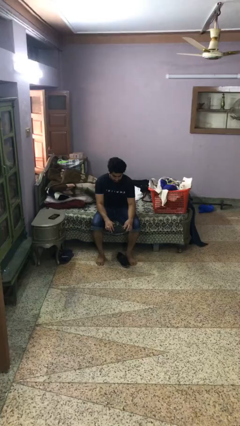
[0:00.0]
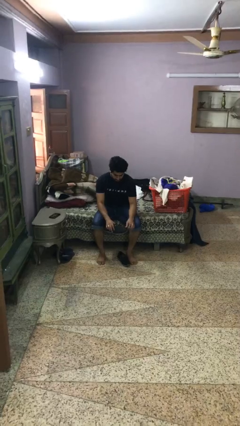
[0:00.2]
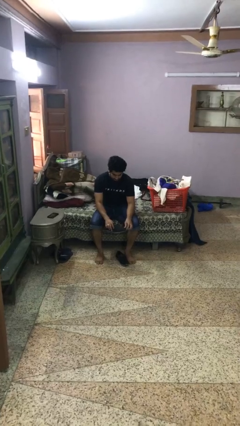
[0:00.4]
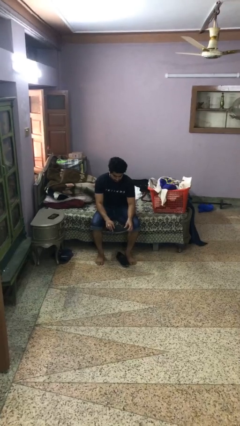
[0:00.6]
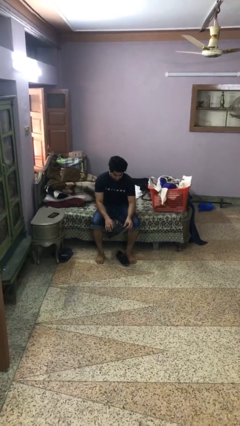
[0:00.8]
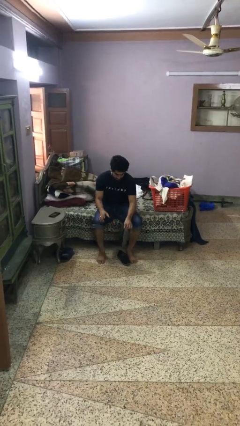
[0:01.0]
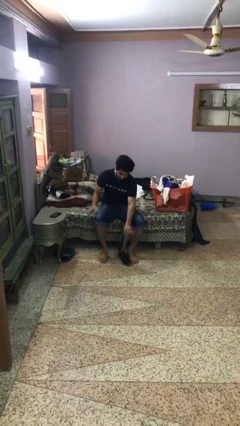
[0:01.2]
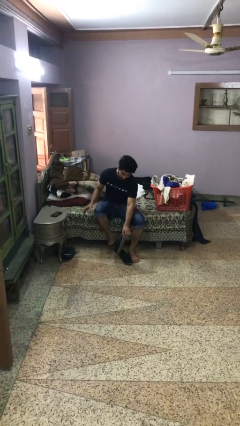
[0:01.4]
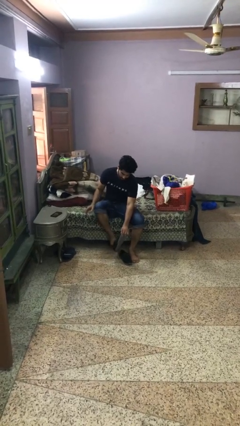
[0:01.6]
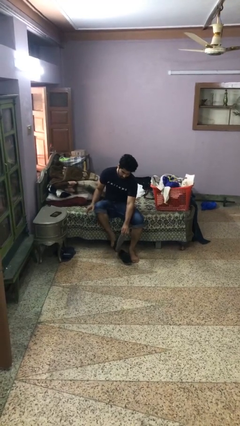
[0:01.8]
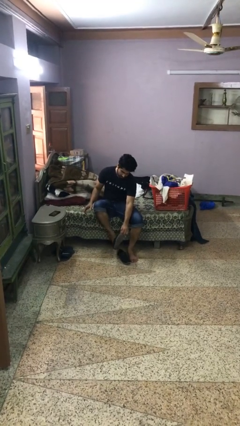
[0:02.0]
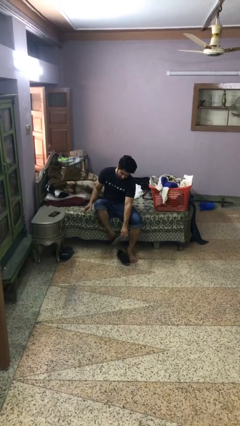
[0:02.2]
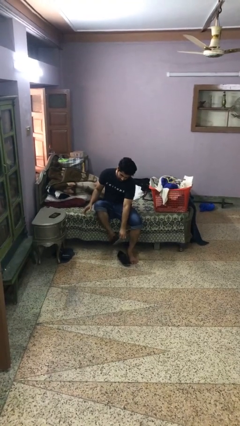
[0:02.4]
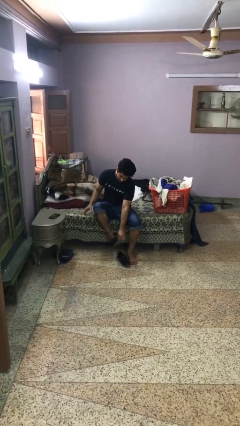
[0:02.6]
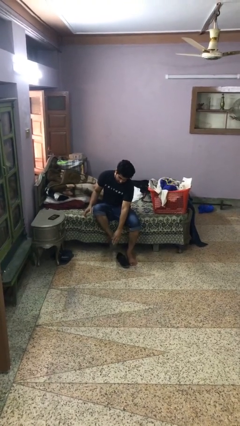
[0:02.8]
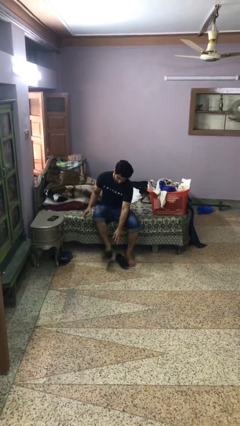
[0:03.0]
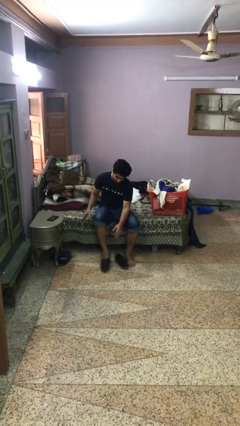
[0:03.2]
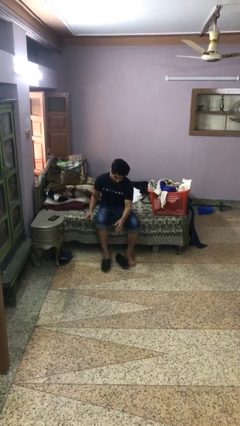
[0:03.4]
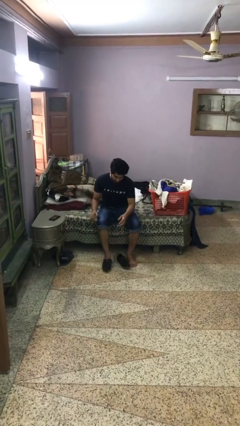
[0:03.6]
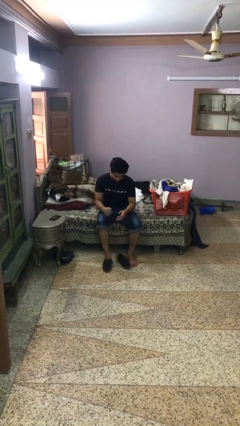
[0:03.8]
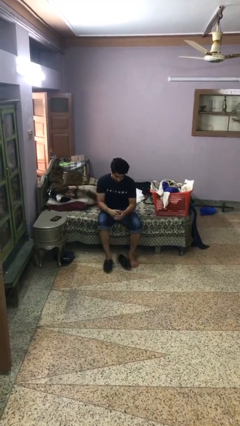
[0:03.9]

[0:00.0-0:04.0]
person puts on boots

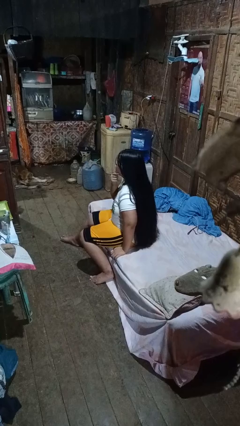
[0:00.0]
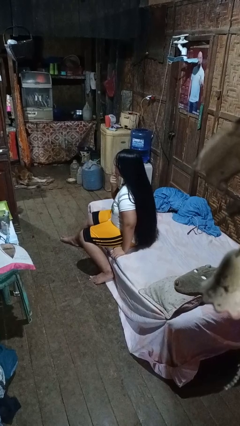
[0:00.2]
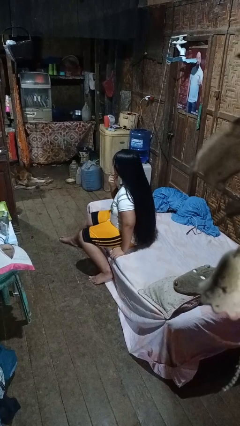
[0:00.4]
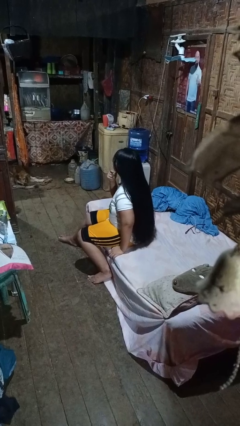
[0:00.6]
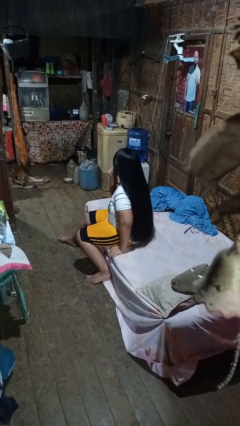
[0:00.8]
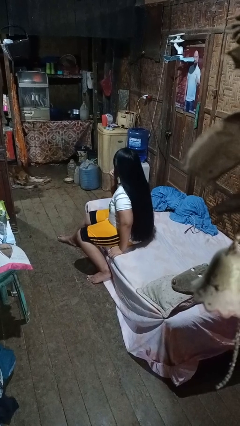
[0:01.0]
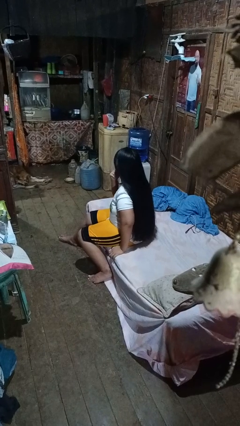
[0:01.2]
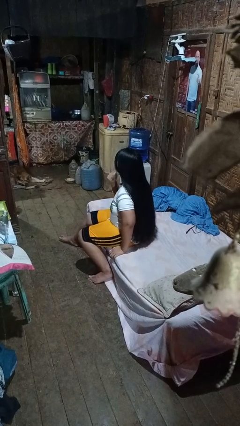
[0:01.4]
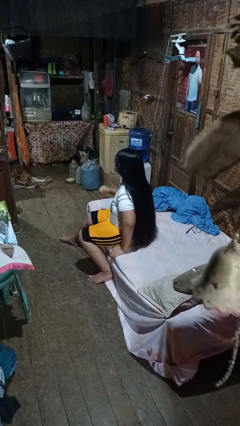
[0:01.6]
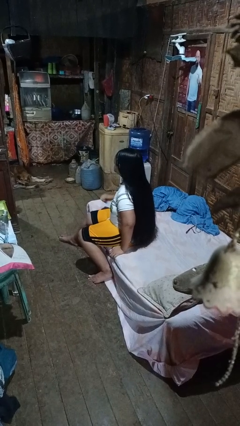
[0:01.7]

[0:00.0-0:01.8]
person strokes chin

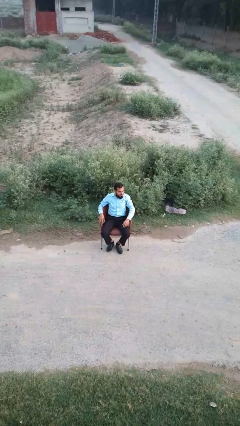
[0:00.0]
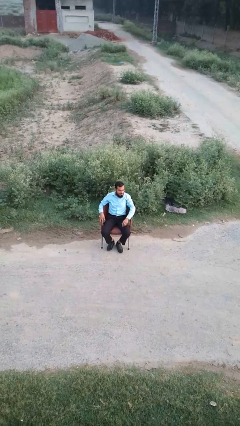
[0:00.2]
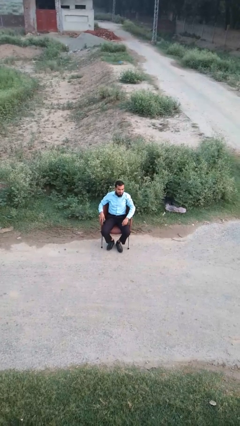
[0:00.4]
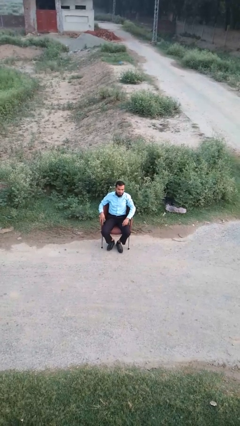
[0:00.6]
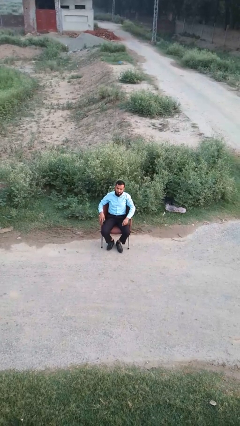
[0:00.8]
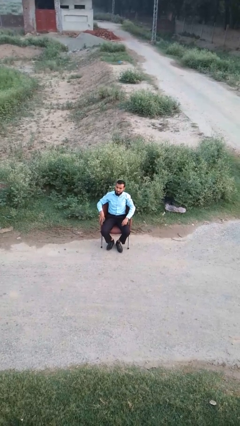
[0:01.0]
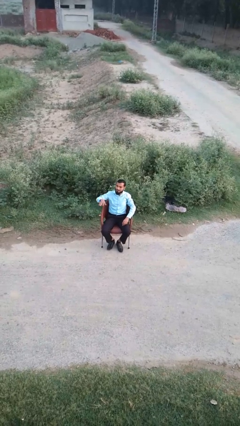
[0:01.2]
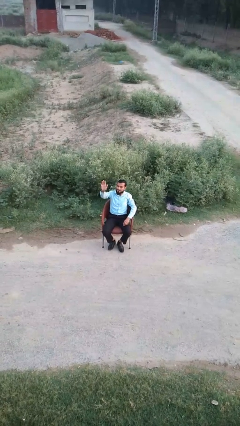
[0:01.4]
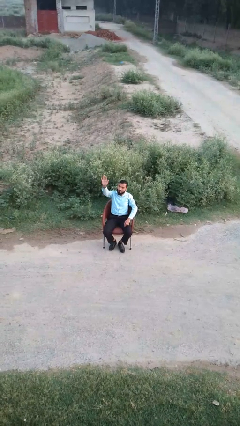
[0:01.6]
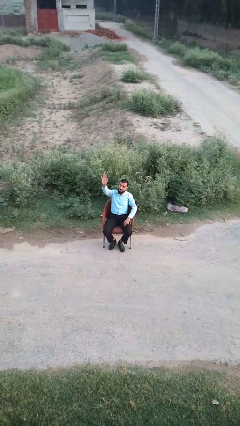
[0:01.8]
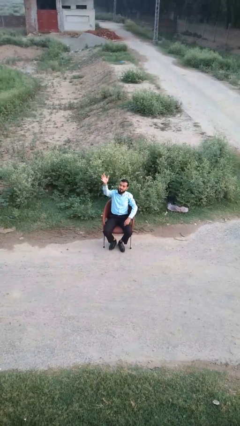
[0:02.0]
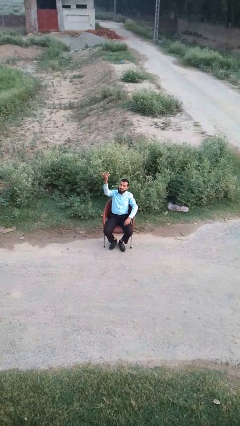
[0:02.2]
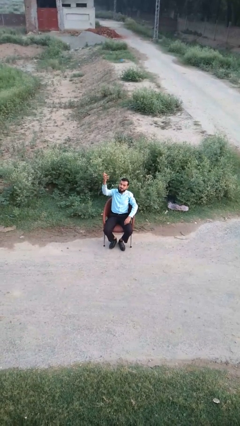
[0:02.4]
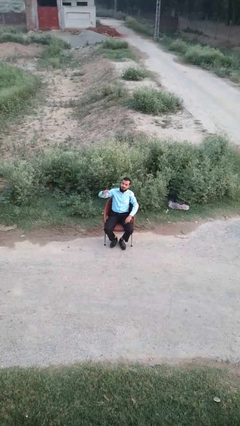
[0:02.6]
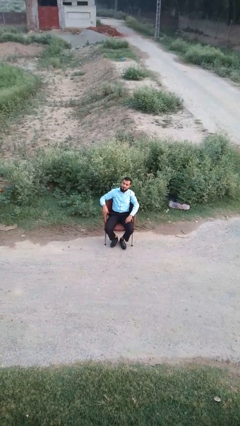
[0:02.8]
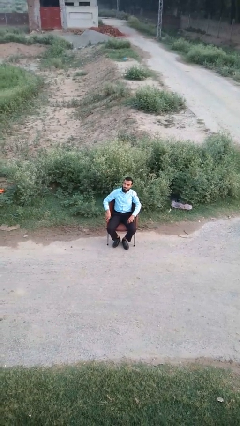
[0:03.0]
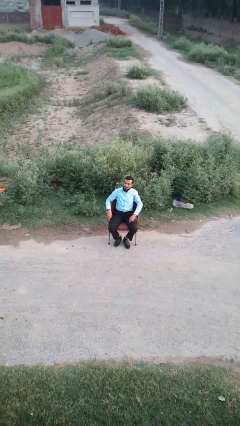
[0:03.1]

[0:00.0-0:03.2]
person gestures raise hand

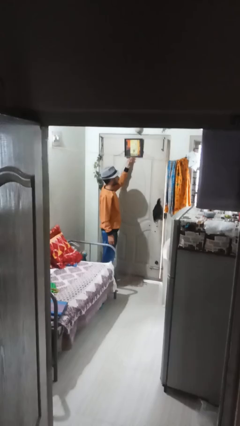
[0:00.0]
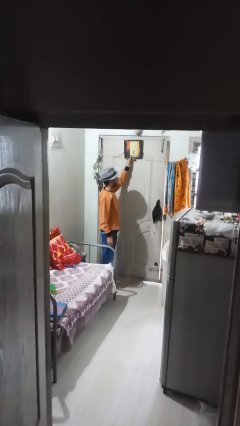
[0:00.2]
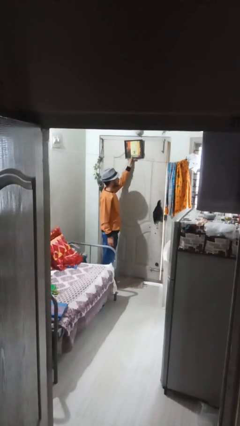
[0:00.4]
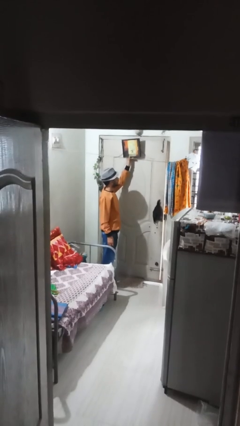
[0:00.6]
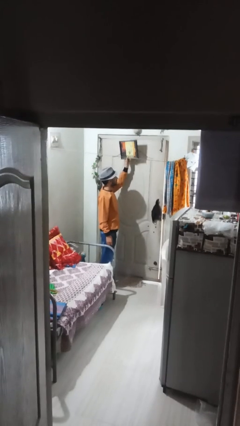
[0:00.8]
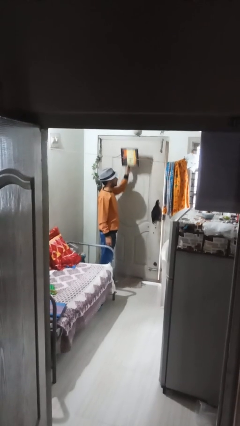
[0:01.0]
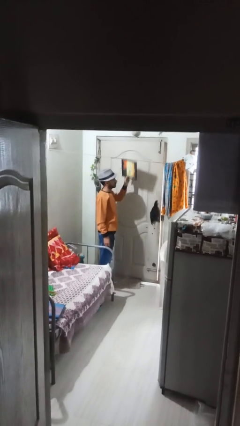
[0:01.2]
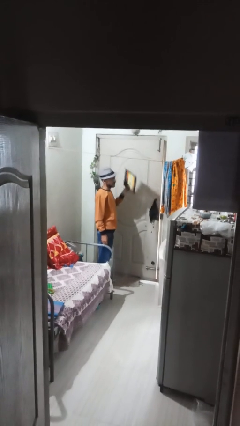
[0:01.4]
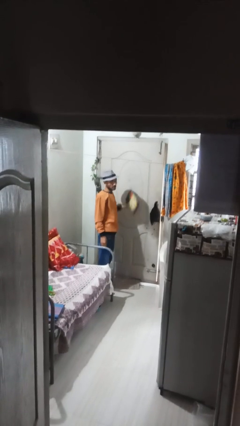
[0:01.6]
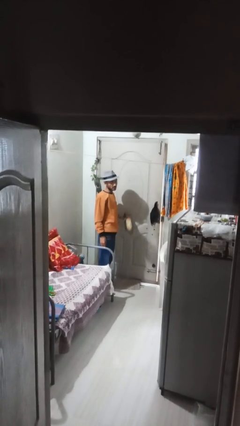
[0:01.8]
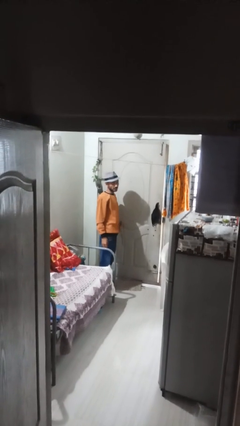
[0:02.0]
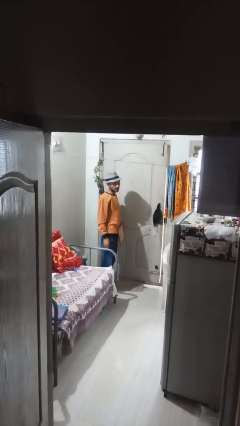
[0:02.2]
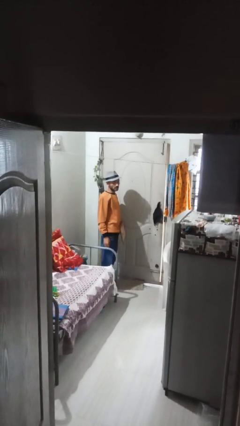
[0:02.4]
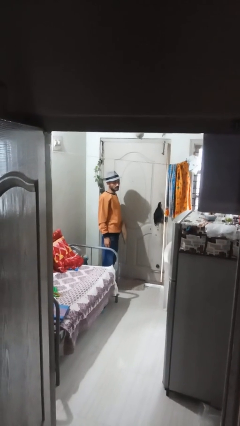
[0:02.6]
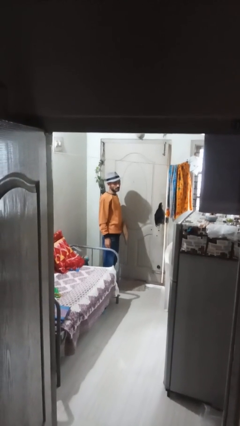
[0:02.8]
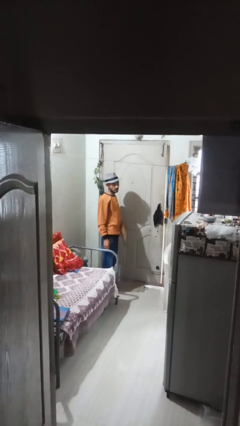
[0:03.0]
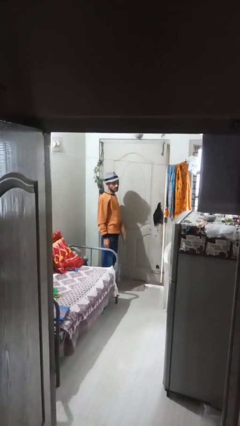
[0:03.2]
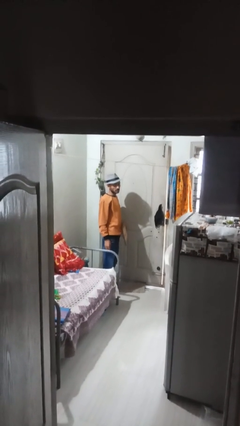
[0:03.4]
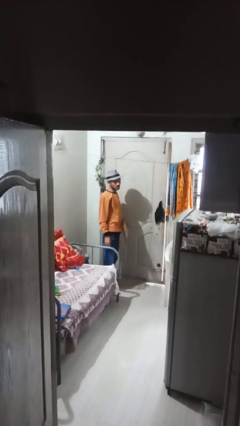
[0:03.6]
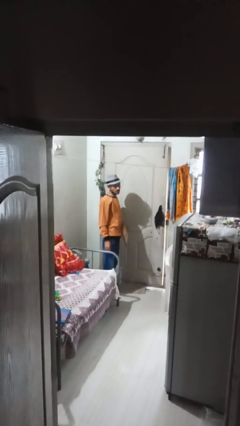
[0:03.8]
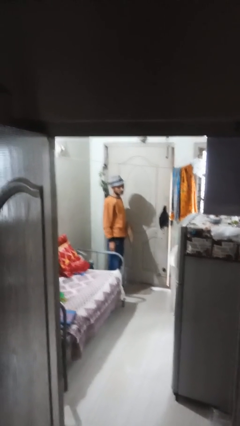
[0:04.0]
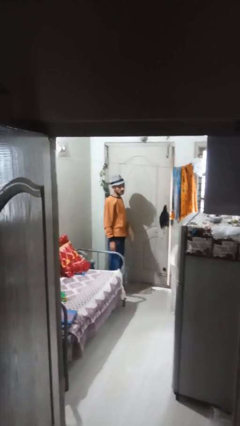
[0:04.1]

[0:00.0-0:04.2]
person takes down picture frame

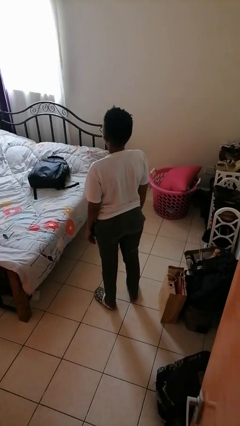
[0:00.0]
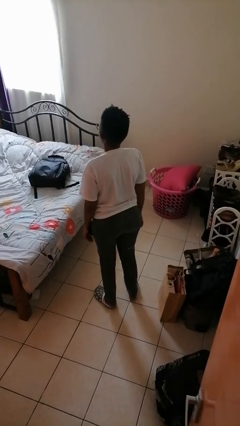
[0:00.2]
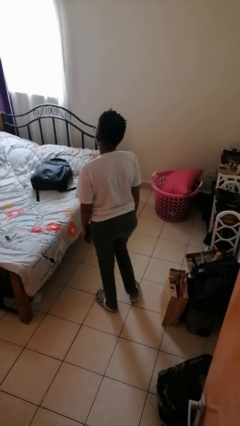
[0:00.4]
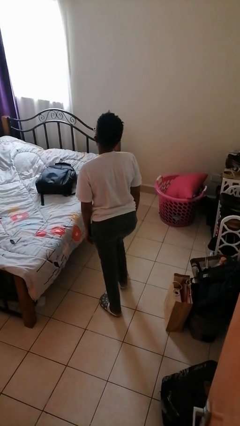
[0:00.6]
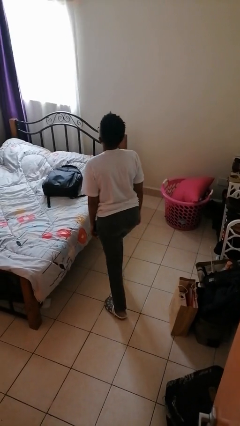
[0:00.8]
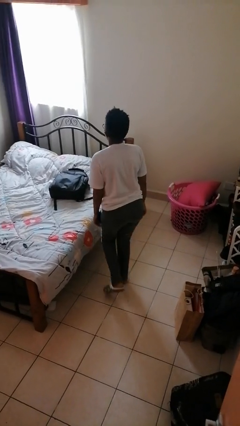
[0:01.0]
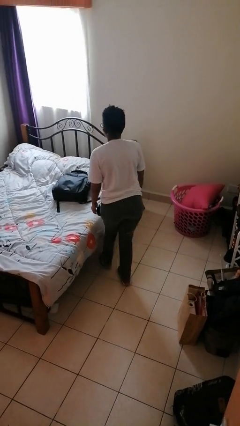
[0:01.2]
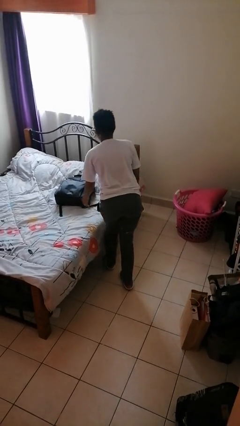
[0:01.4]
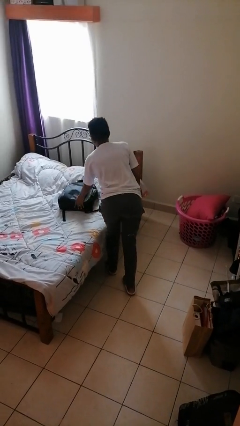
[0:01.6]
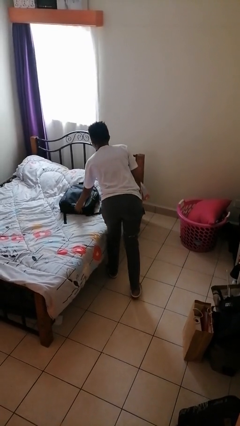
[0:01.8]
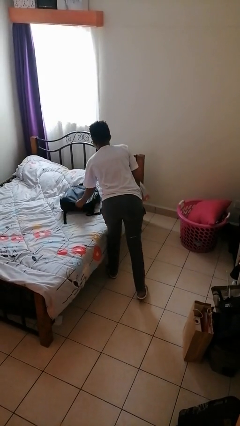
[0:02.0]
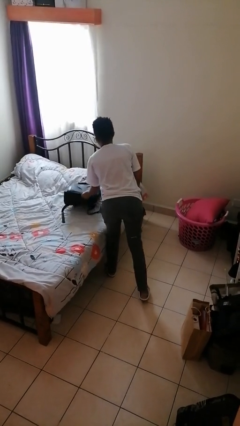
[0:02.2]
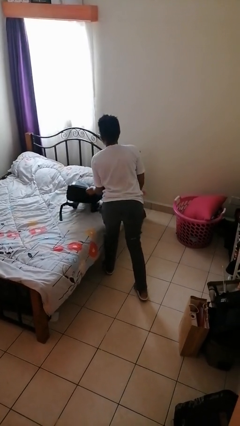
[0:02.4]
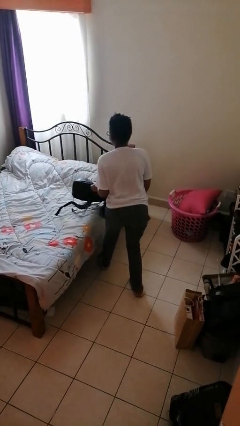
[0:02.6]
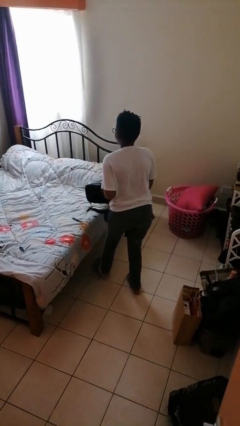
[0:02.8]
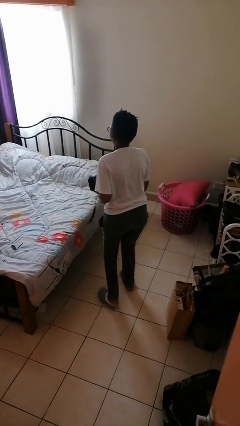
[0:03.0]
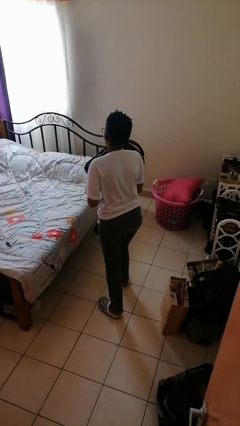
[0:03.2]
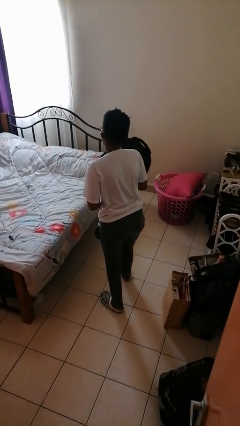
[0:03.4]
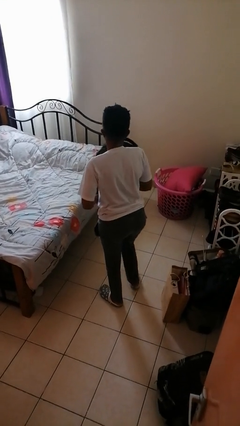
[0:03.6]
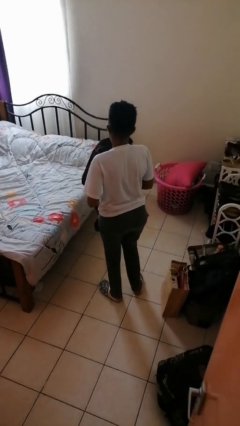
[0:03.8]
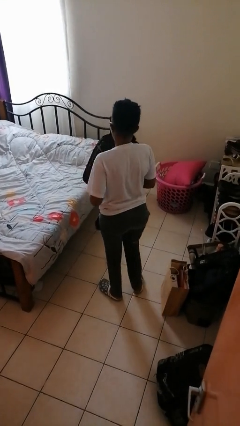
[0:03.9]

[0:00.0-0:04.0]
person picks up object from bed

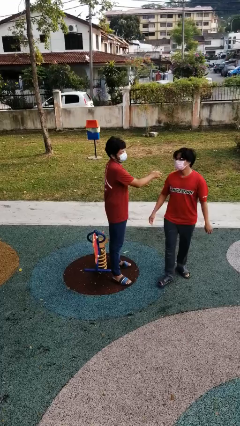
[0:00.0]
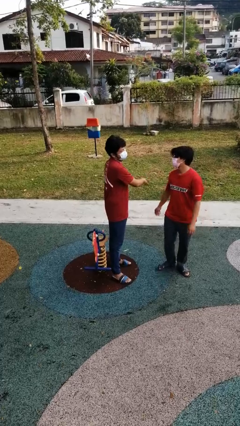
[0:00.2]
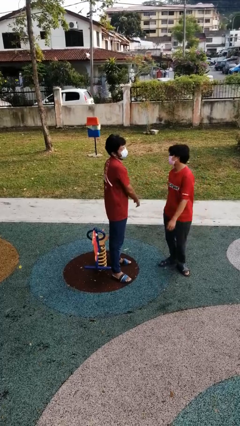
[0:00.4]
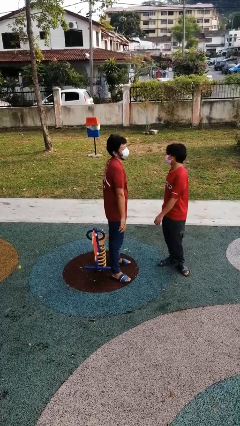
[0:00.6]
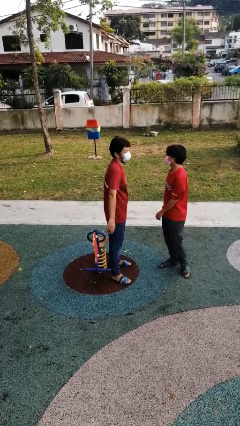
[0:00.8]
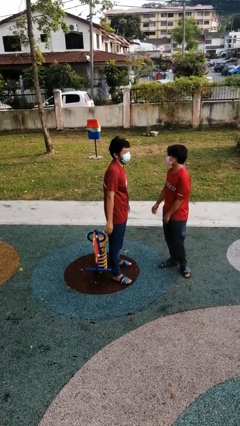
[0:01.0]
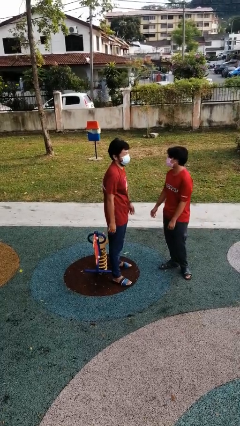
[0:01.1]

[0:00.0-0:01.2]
person spins person around
